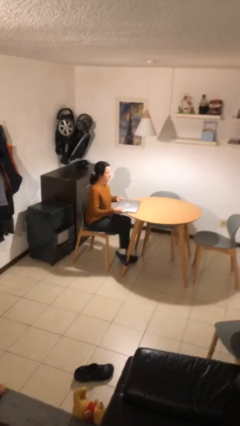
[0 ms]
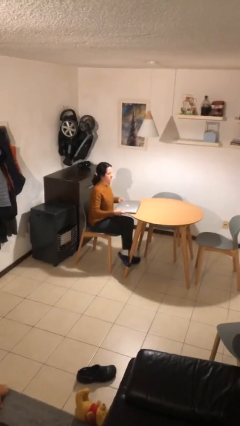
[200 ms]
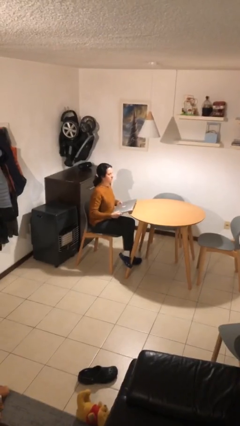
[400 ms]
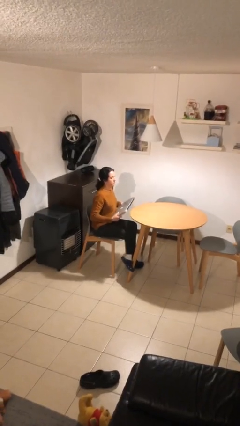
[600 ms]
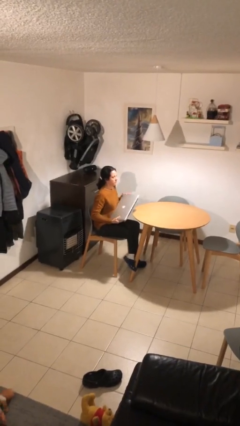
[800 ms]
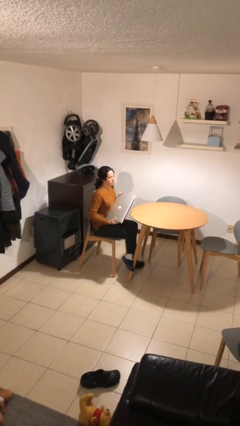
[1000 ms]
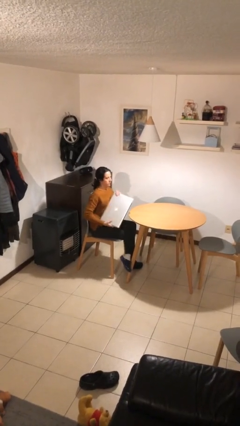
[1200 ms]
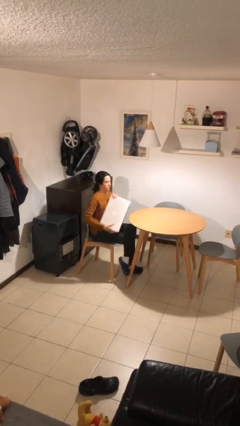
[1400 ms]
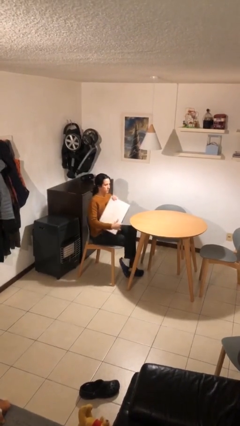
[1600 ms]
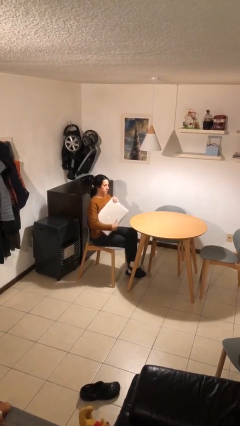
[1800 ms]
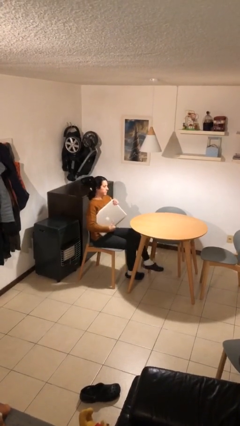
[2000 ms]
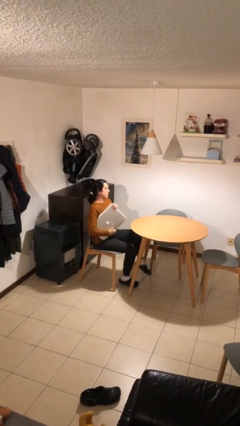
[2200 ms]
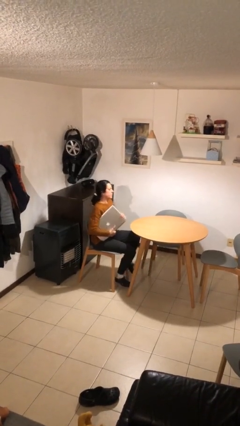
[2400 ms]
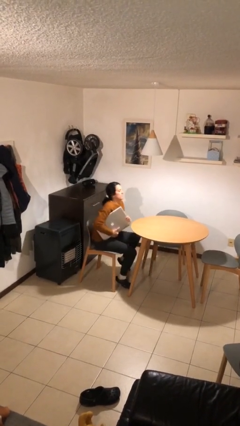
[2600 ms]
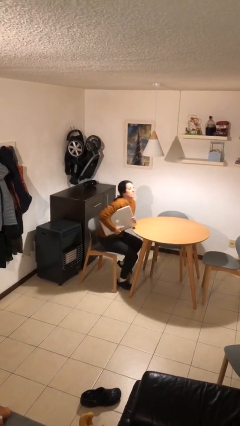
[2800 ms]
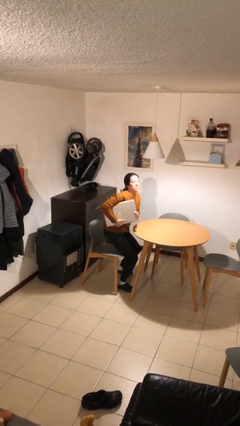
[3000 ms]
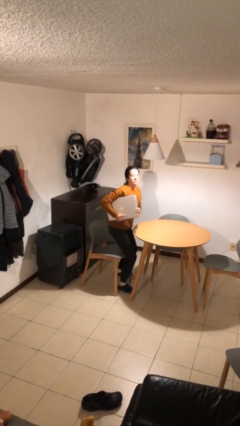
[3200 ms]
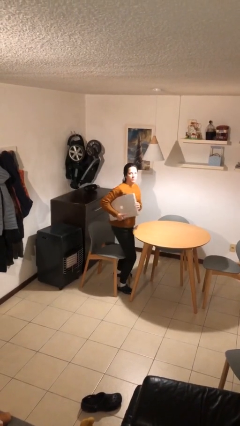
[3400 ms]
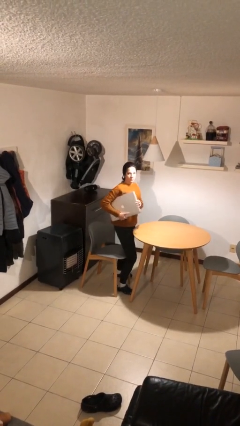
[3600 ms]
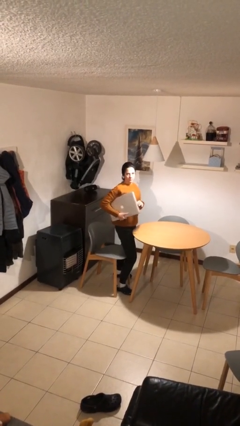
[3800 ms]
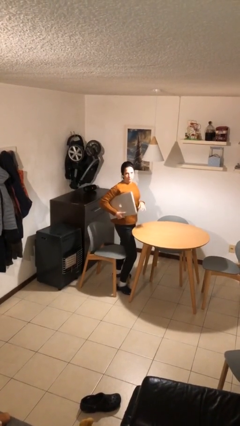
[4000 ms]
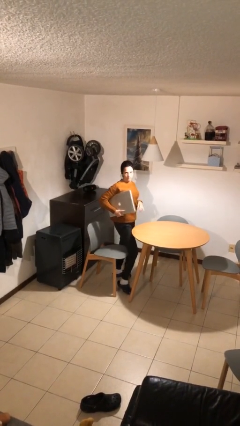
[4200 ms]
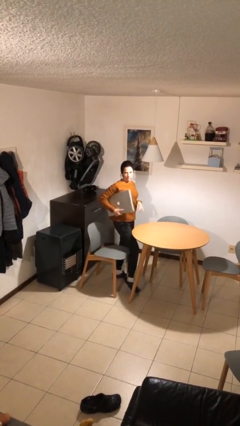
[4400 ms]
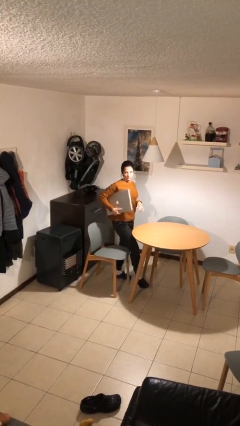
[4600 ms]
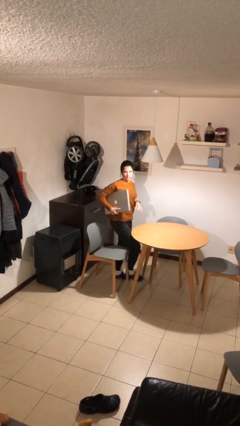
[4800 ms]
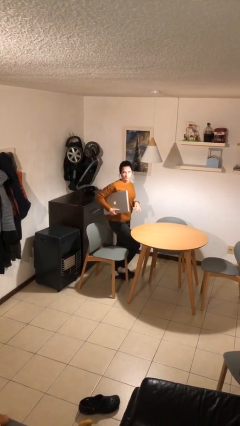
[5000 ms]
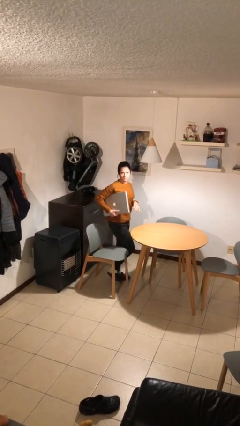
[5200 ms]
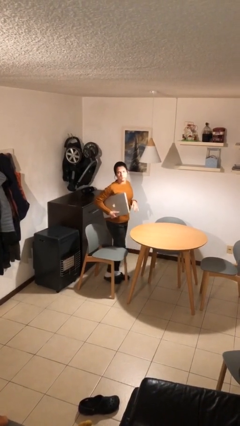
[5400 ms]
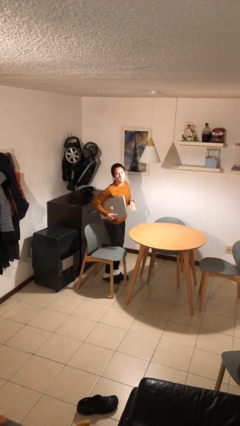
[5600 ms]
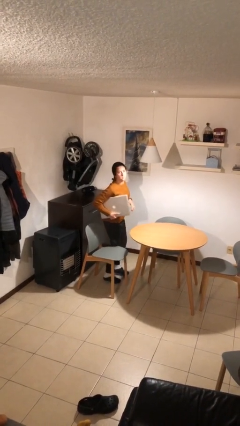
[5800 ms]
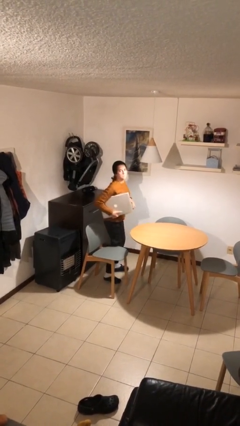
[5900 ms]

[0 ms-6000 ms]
person sits down

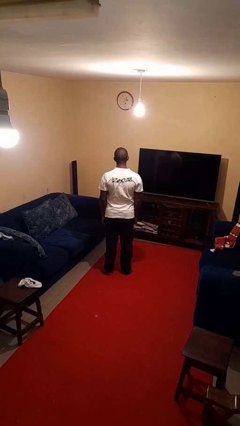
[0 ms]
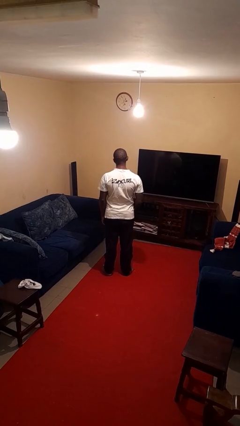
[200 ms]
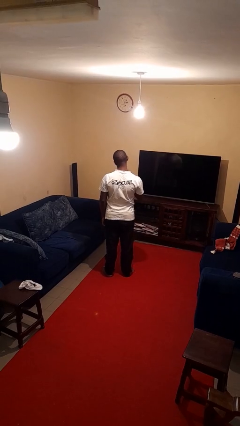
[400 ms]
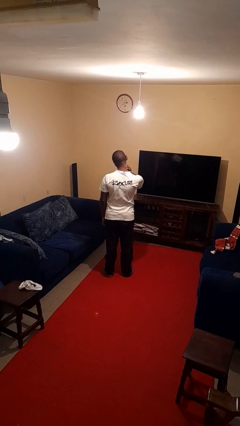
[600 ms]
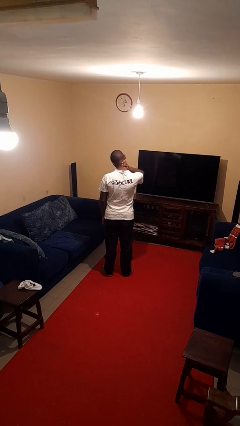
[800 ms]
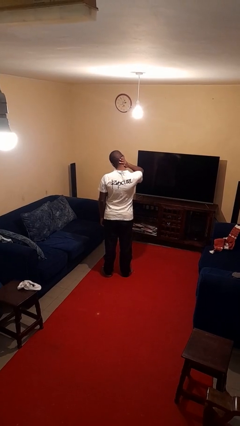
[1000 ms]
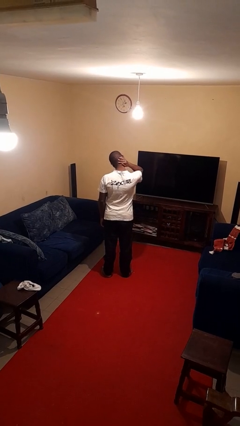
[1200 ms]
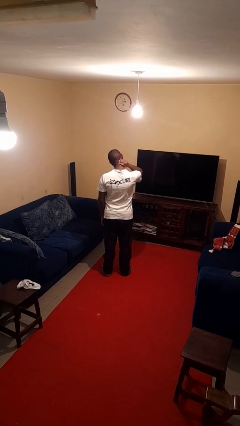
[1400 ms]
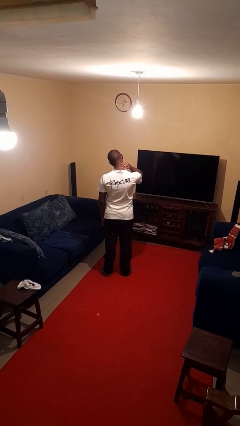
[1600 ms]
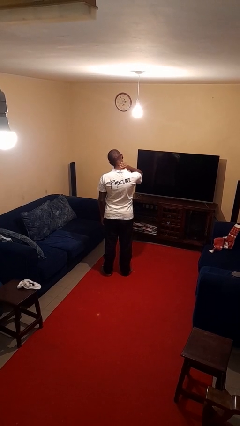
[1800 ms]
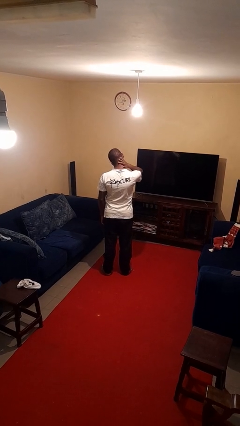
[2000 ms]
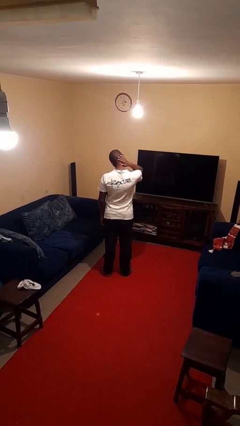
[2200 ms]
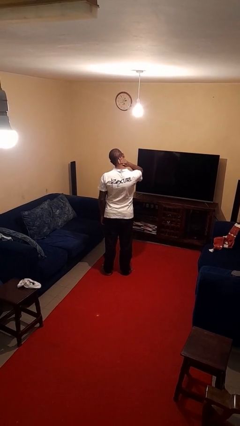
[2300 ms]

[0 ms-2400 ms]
person rubs neck

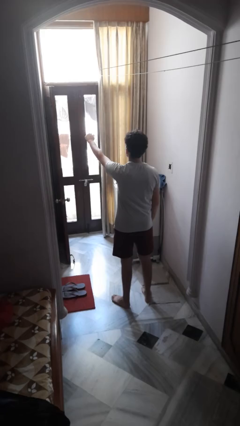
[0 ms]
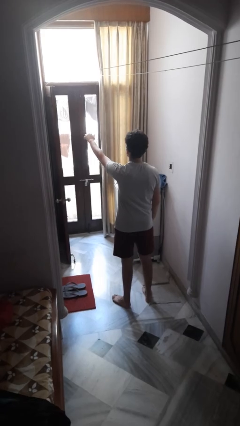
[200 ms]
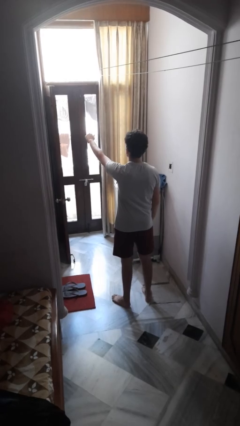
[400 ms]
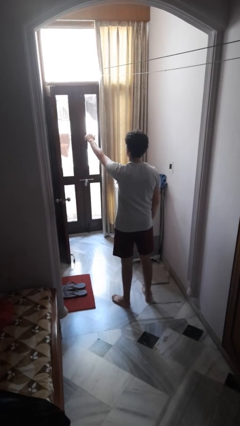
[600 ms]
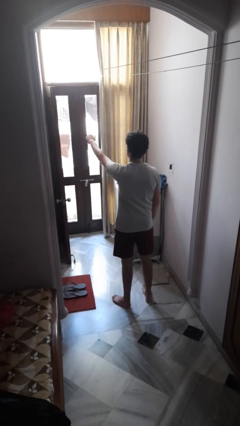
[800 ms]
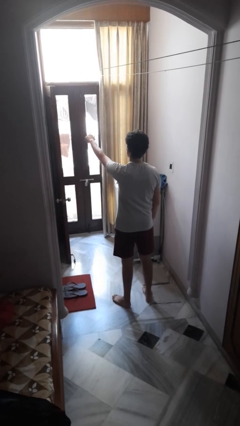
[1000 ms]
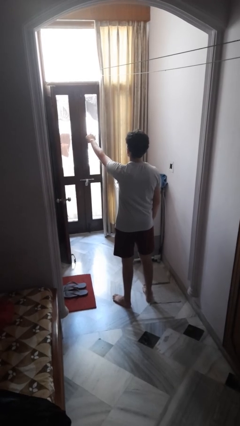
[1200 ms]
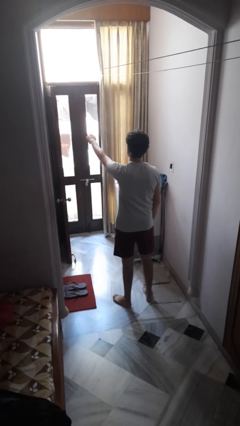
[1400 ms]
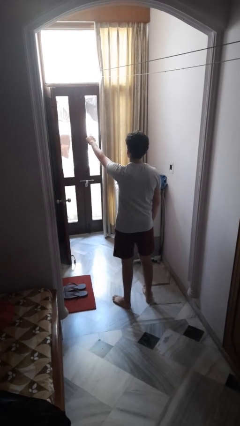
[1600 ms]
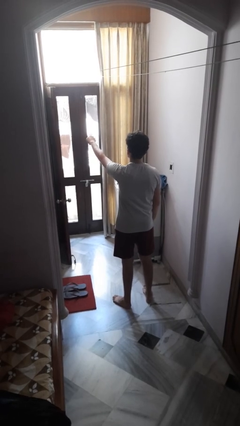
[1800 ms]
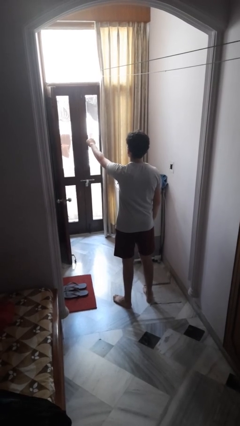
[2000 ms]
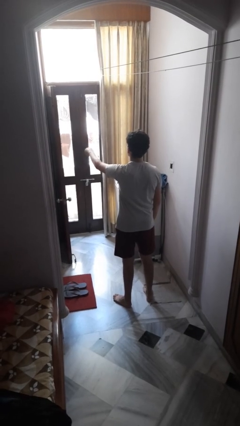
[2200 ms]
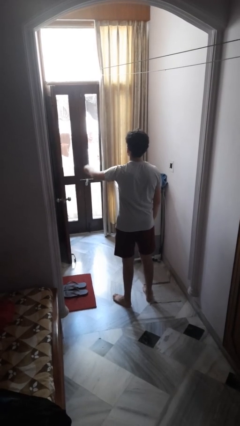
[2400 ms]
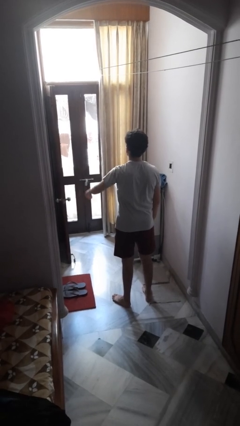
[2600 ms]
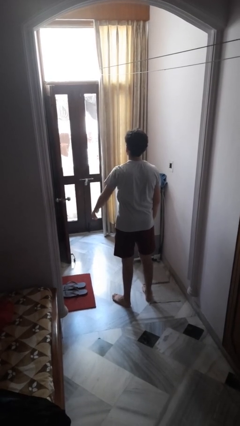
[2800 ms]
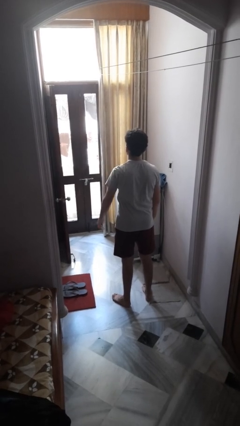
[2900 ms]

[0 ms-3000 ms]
person gestures come here

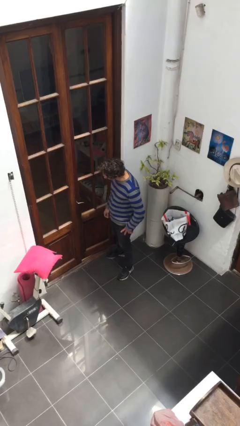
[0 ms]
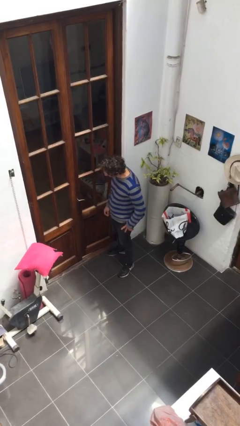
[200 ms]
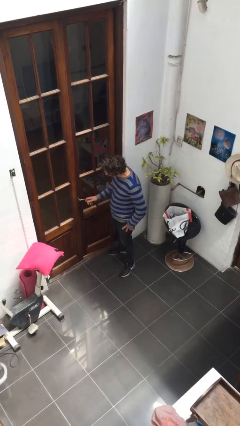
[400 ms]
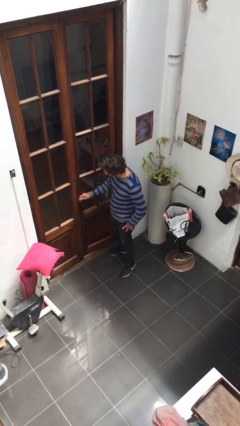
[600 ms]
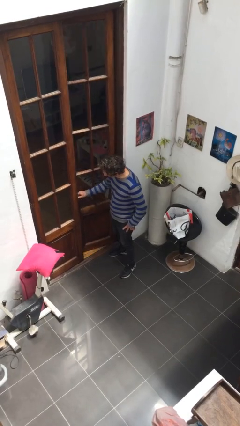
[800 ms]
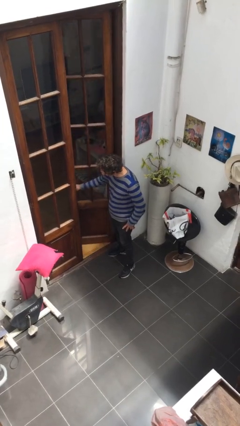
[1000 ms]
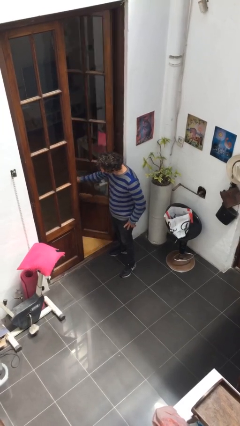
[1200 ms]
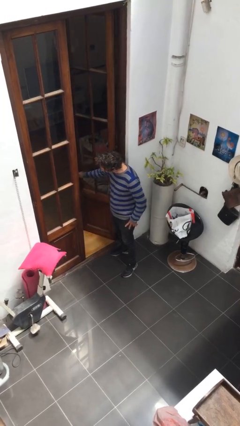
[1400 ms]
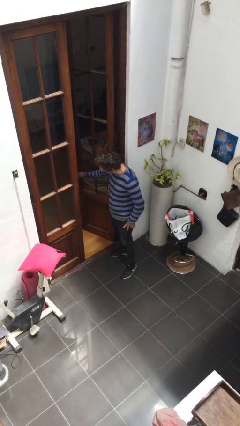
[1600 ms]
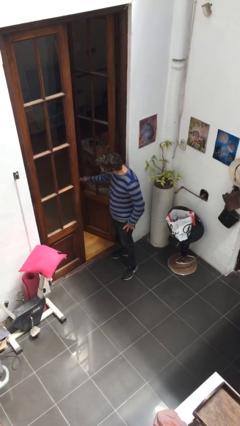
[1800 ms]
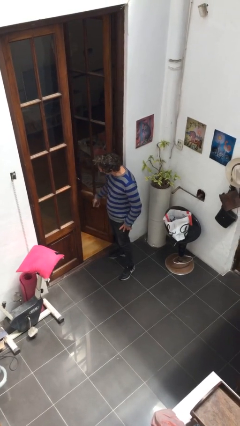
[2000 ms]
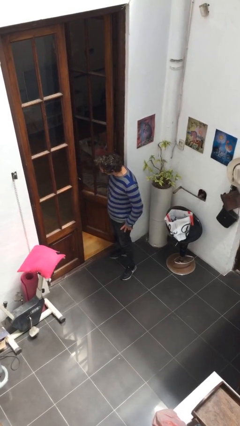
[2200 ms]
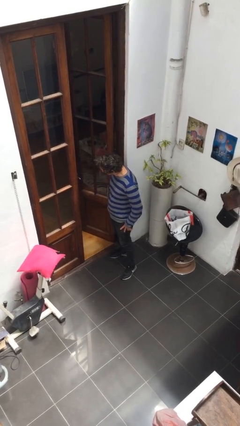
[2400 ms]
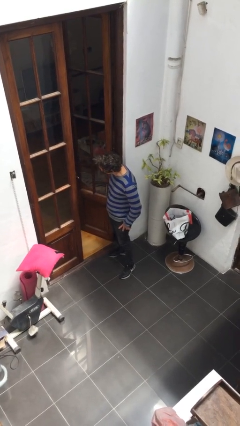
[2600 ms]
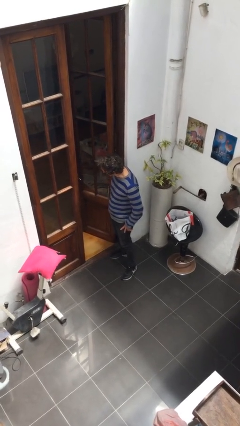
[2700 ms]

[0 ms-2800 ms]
person opens facility door

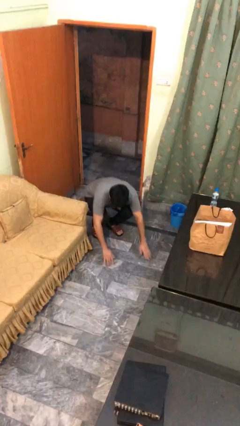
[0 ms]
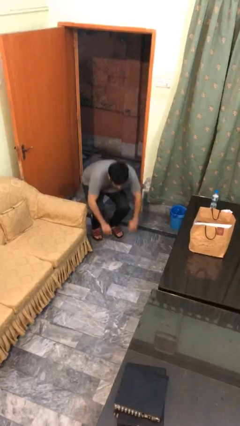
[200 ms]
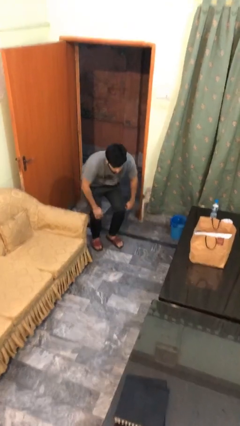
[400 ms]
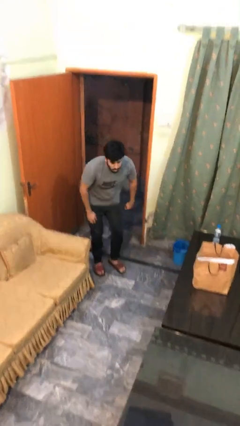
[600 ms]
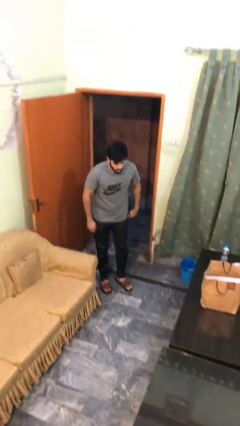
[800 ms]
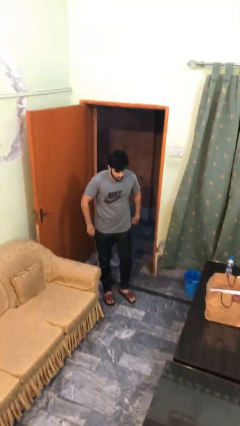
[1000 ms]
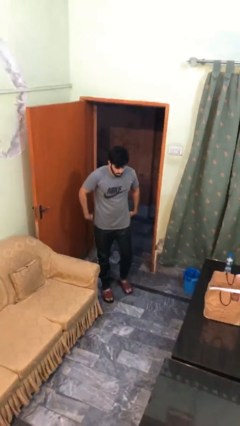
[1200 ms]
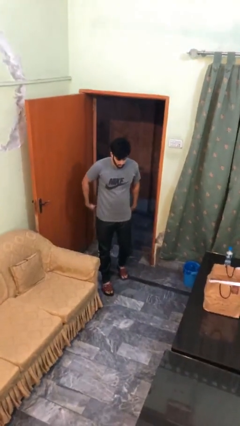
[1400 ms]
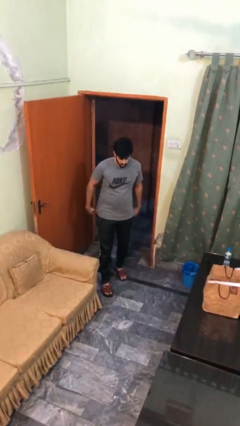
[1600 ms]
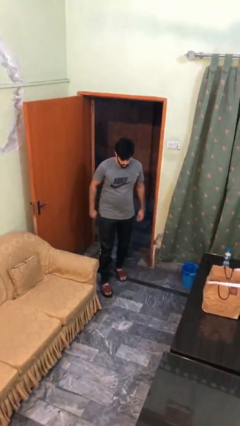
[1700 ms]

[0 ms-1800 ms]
person stands up from floor

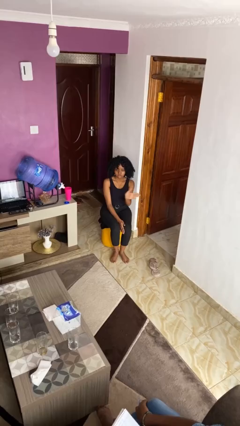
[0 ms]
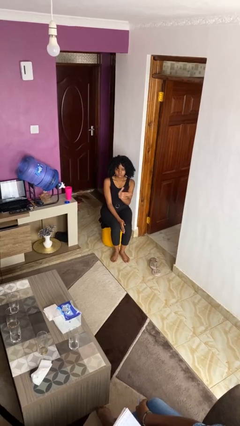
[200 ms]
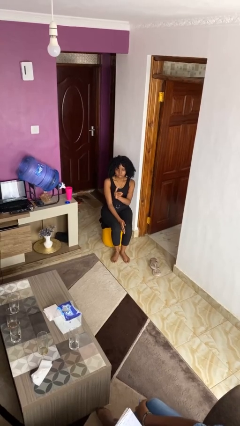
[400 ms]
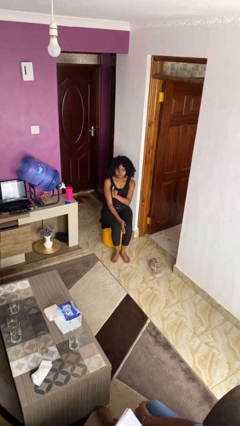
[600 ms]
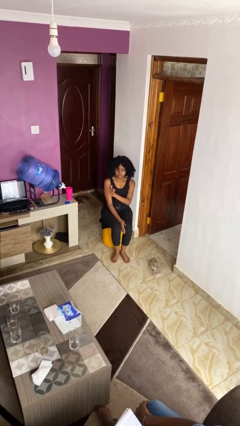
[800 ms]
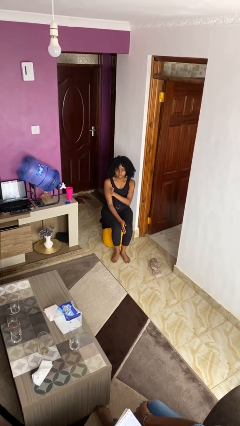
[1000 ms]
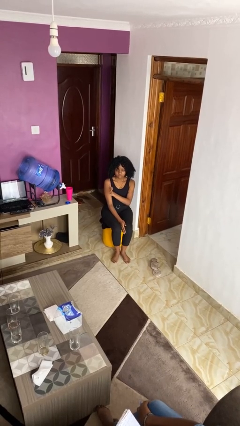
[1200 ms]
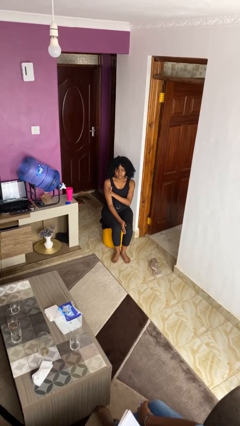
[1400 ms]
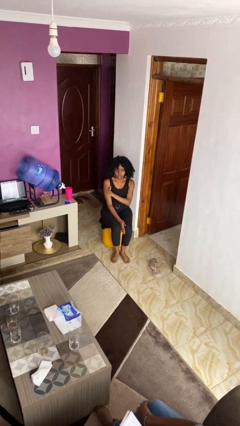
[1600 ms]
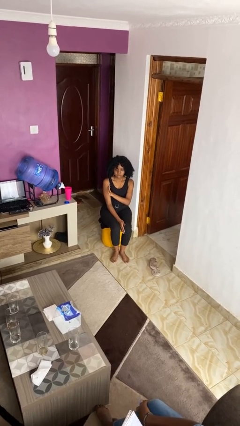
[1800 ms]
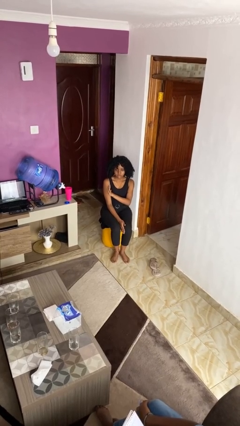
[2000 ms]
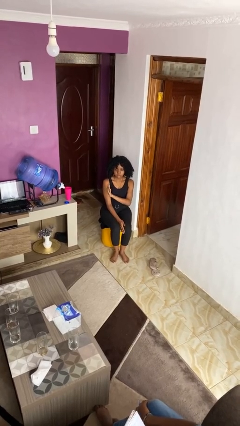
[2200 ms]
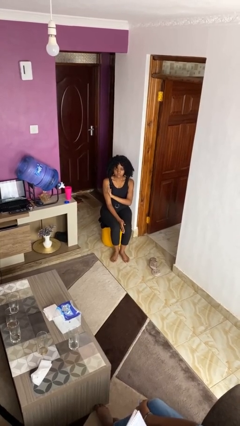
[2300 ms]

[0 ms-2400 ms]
person gestures swipe right
